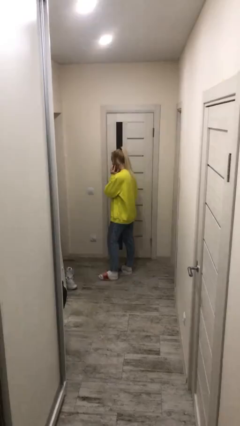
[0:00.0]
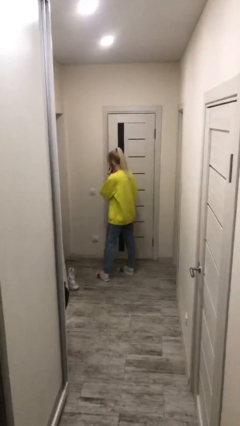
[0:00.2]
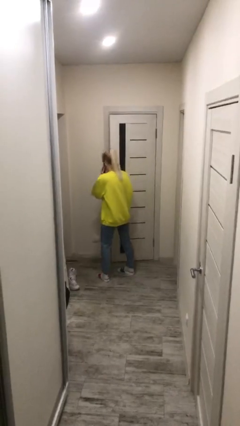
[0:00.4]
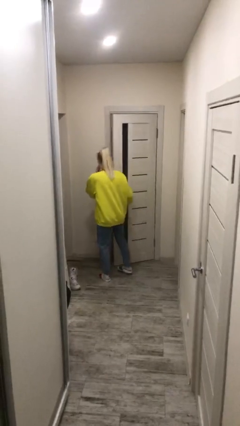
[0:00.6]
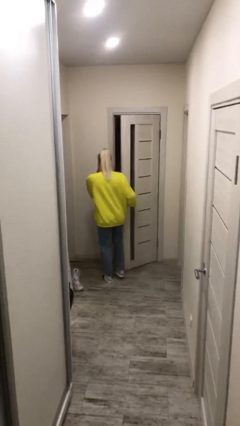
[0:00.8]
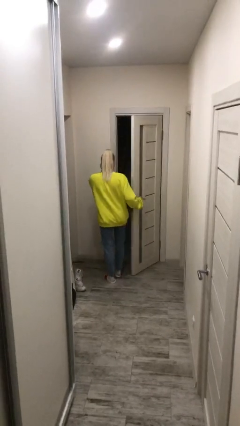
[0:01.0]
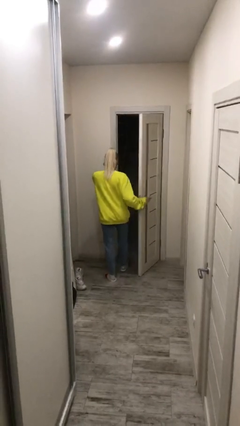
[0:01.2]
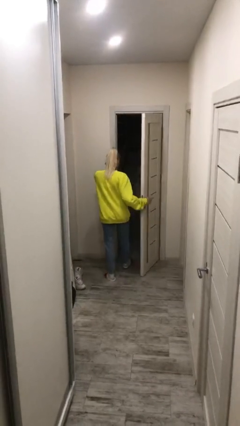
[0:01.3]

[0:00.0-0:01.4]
person opens facility door

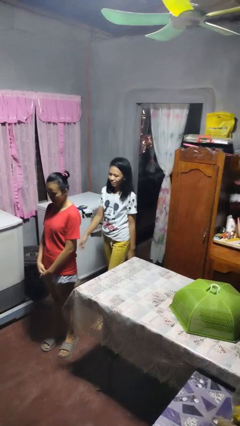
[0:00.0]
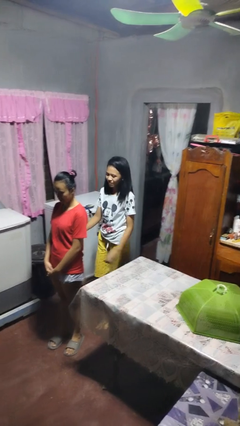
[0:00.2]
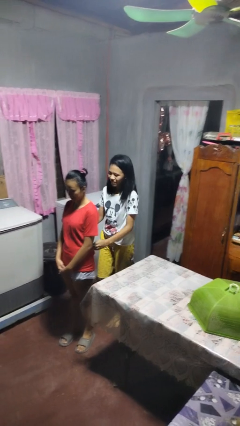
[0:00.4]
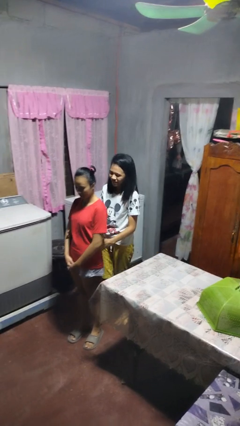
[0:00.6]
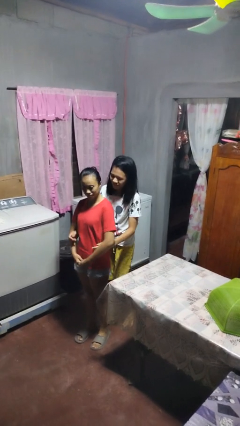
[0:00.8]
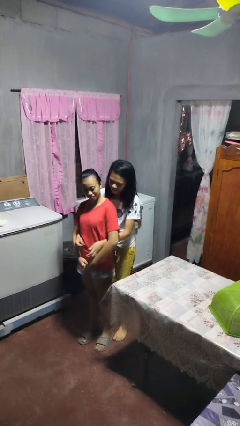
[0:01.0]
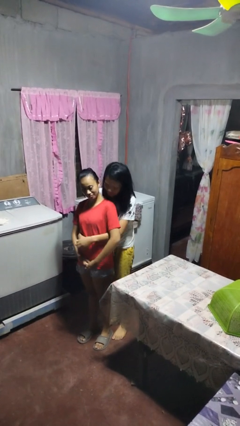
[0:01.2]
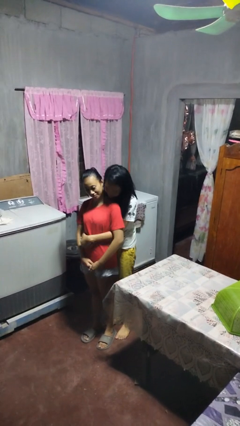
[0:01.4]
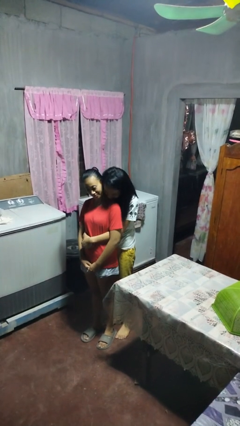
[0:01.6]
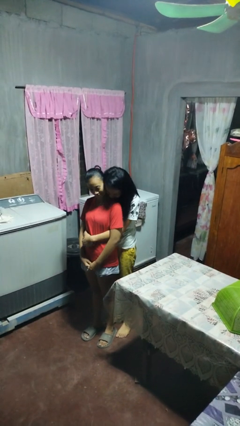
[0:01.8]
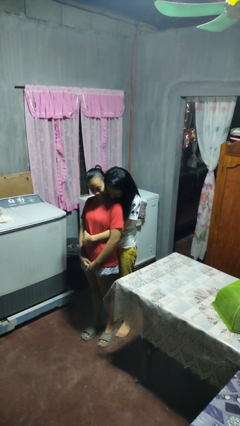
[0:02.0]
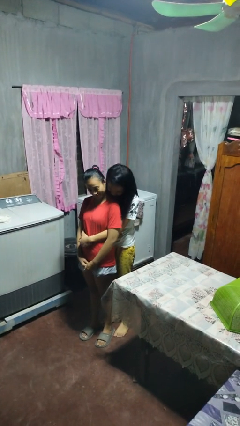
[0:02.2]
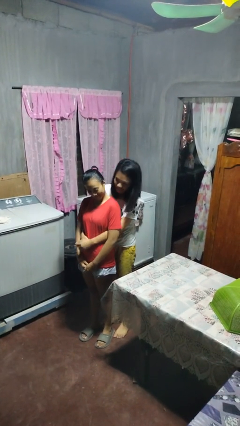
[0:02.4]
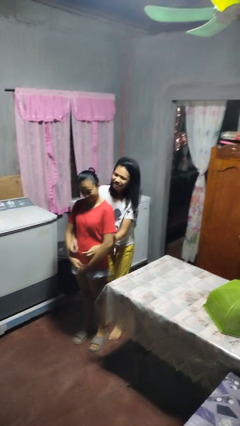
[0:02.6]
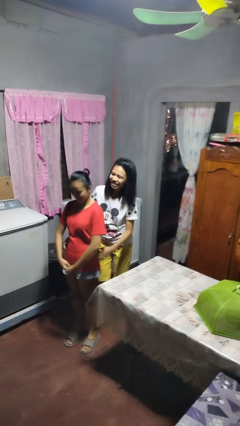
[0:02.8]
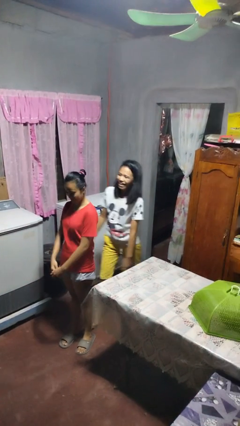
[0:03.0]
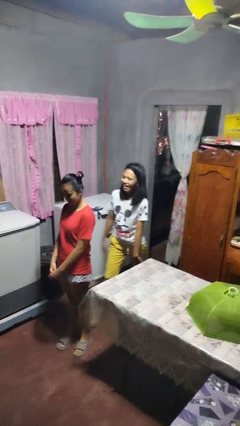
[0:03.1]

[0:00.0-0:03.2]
person hugs person from behind

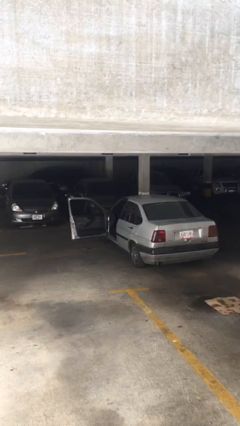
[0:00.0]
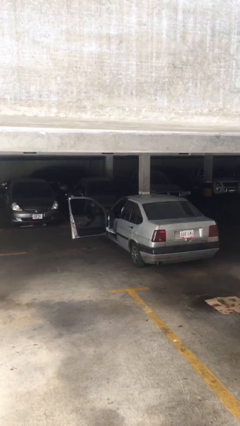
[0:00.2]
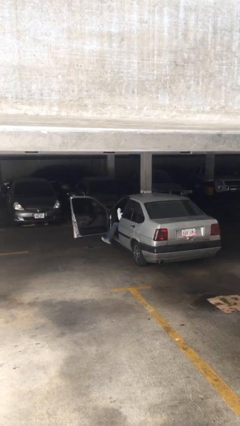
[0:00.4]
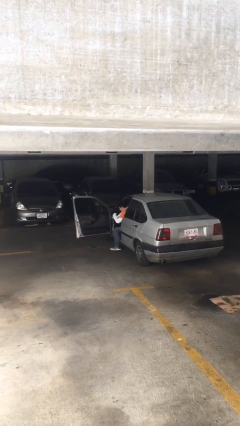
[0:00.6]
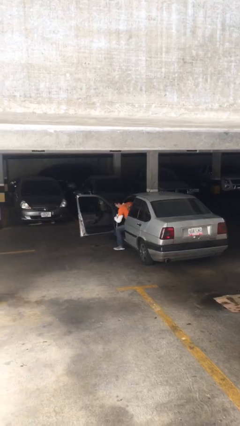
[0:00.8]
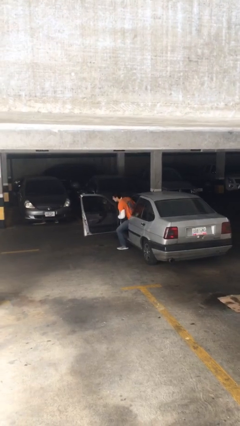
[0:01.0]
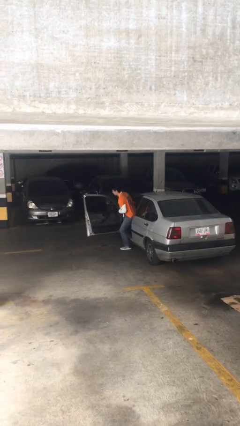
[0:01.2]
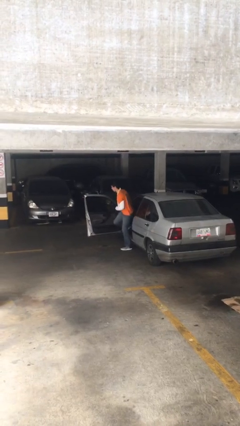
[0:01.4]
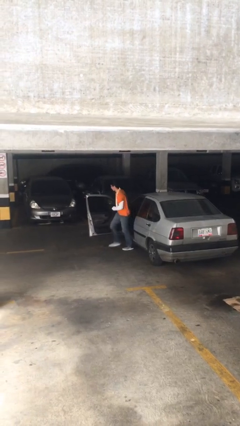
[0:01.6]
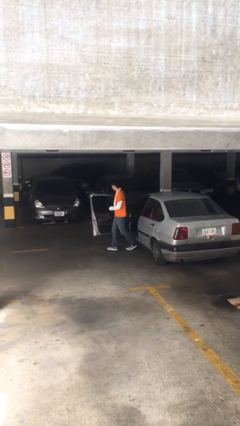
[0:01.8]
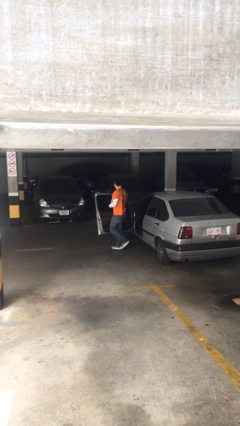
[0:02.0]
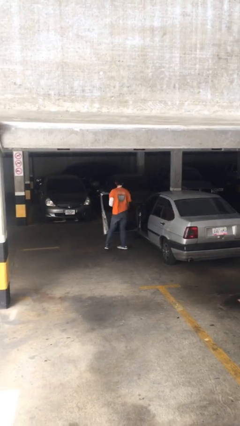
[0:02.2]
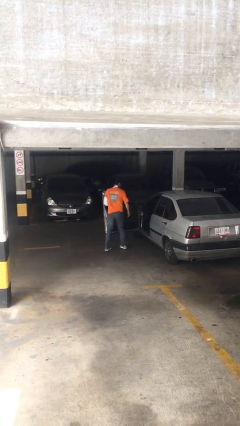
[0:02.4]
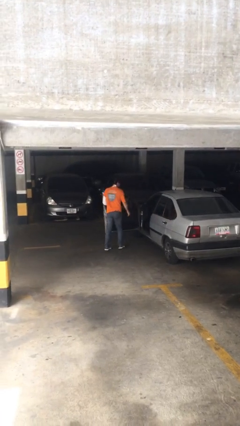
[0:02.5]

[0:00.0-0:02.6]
person exits car

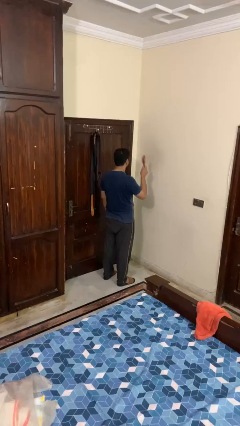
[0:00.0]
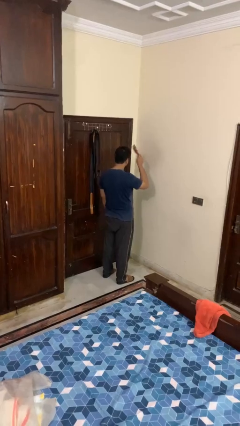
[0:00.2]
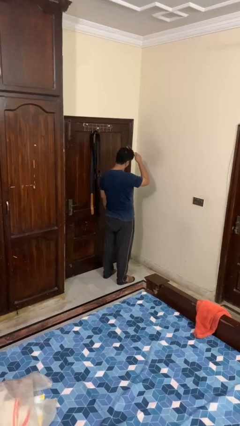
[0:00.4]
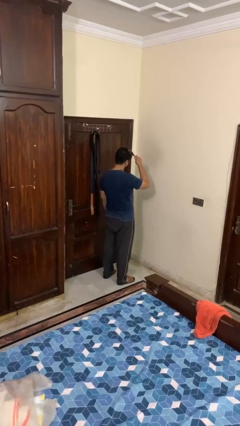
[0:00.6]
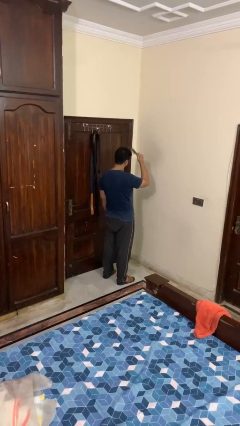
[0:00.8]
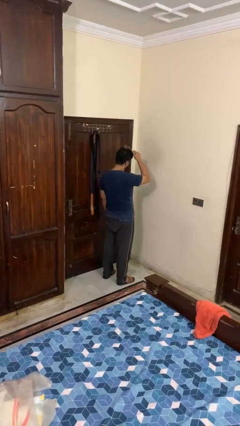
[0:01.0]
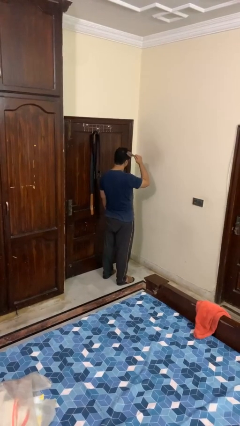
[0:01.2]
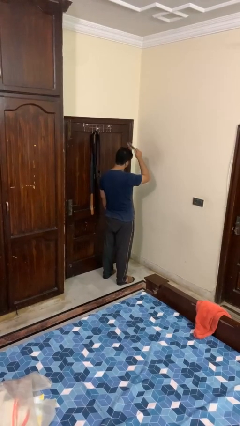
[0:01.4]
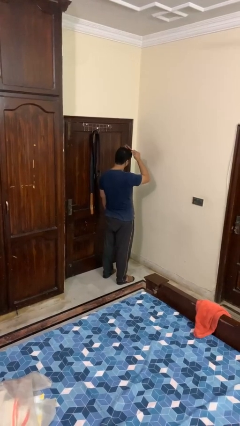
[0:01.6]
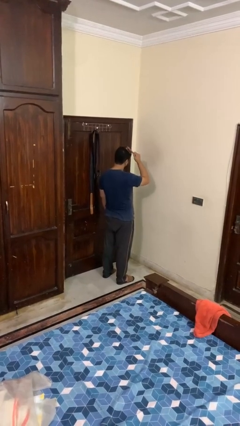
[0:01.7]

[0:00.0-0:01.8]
person brushes hair

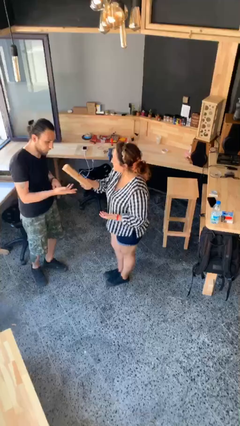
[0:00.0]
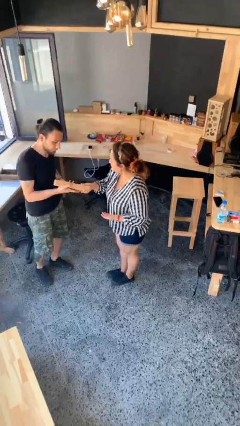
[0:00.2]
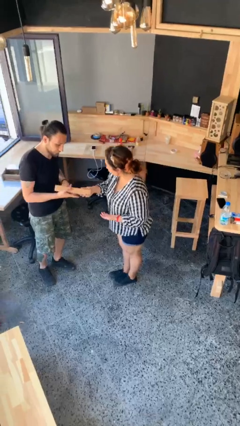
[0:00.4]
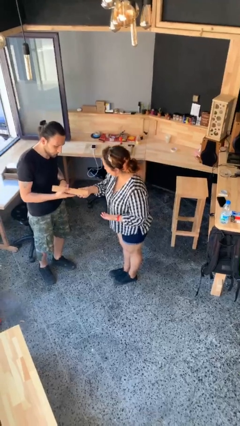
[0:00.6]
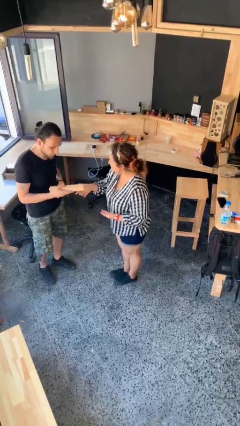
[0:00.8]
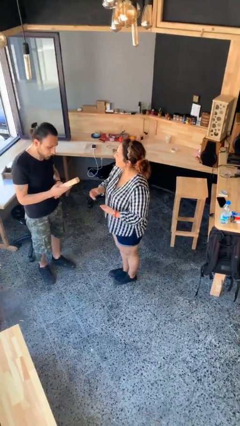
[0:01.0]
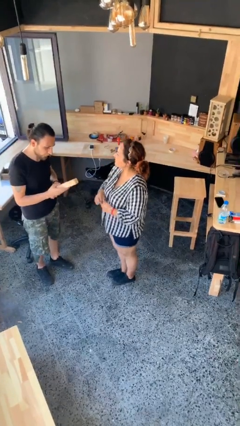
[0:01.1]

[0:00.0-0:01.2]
person transfers object to person

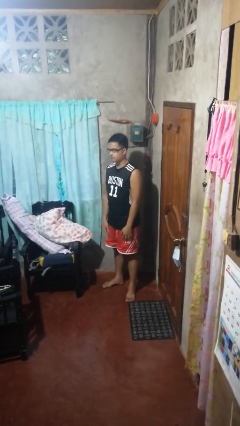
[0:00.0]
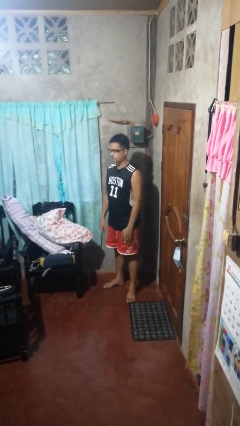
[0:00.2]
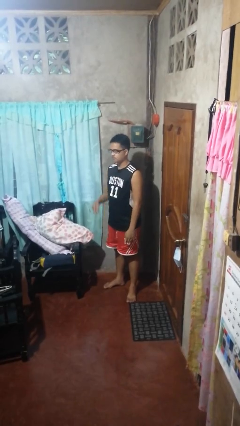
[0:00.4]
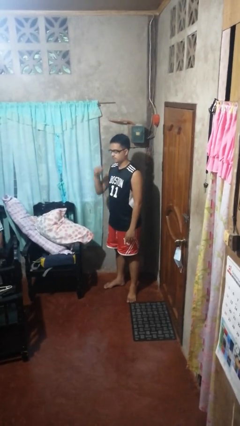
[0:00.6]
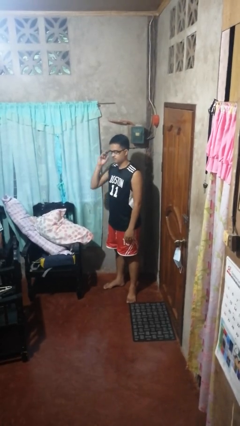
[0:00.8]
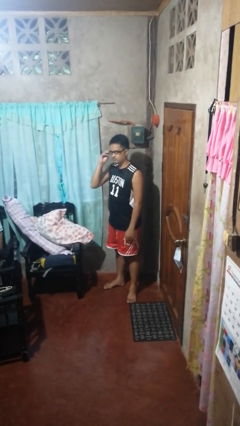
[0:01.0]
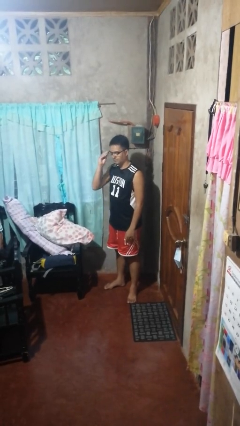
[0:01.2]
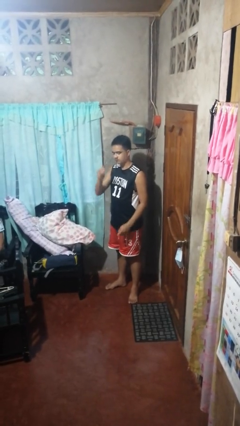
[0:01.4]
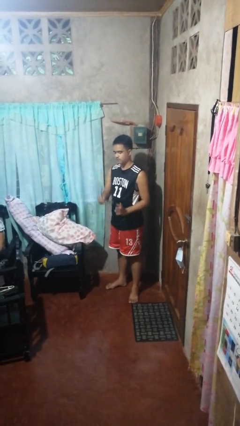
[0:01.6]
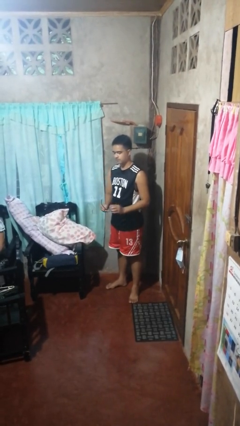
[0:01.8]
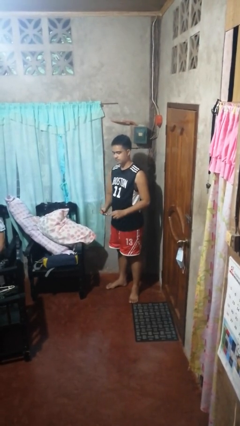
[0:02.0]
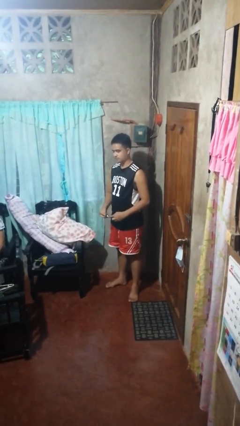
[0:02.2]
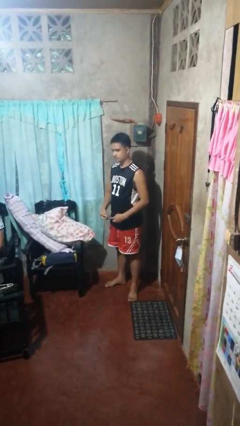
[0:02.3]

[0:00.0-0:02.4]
person takes off glasses

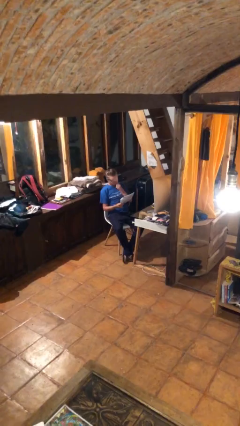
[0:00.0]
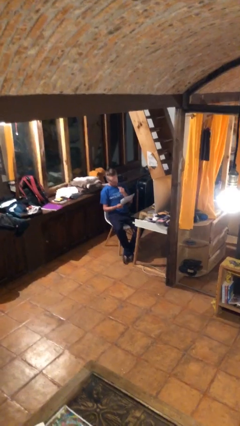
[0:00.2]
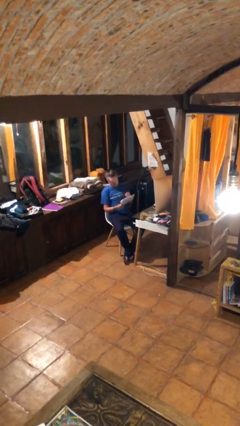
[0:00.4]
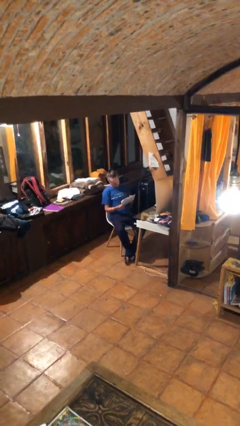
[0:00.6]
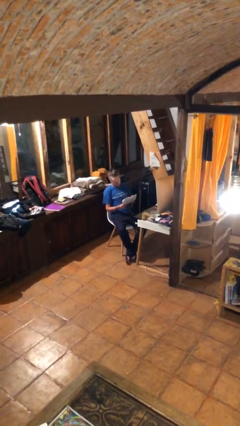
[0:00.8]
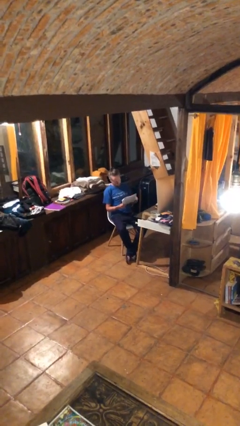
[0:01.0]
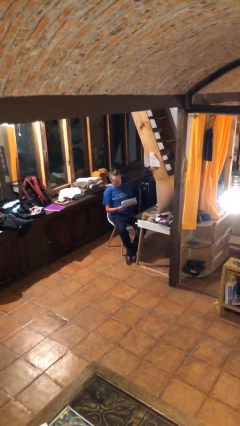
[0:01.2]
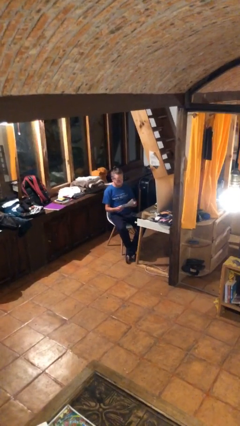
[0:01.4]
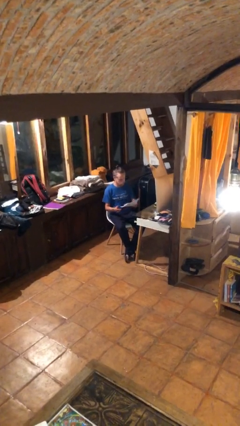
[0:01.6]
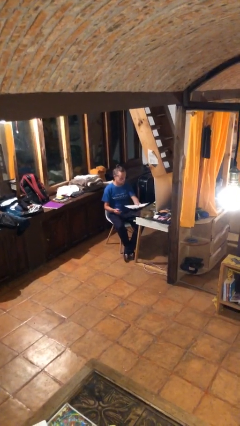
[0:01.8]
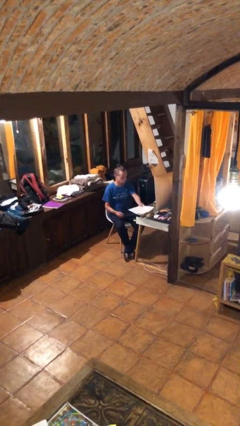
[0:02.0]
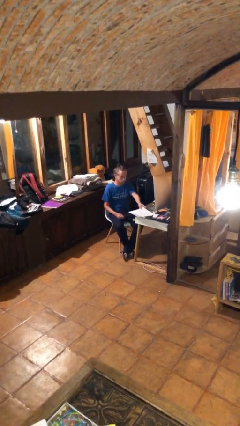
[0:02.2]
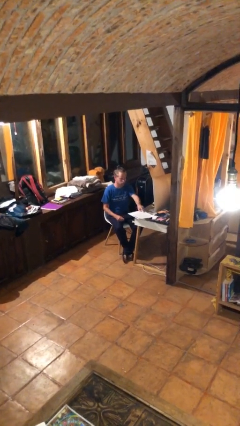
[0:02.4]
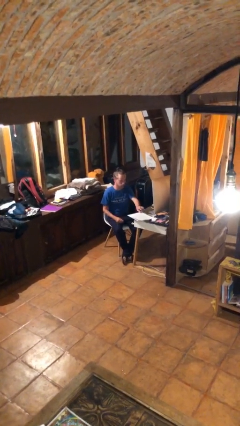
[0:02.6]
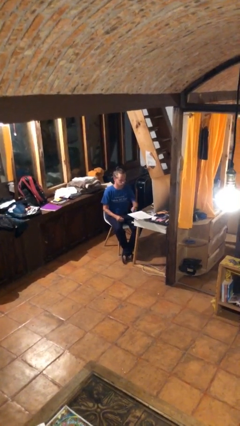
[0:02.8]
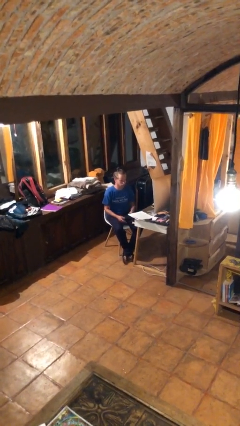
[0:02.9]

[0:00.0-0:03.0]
person puts down object on table

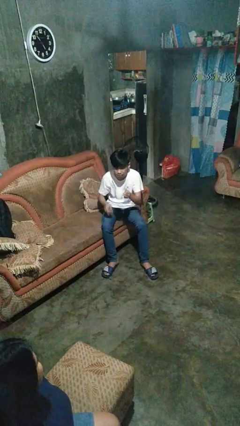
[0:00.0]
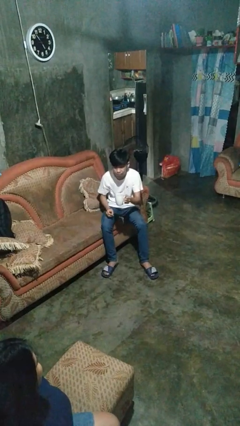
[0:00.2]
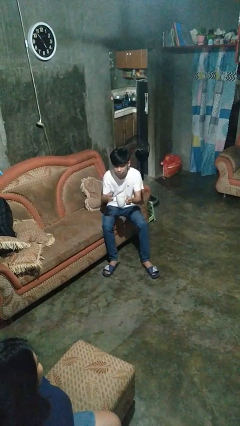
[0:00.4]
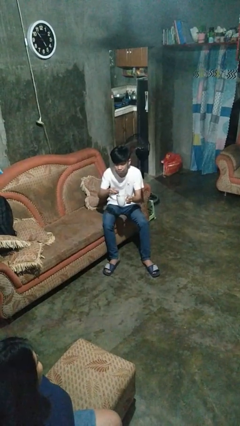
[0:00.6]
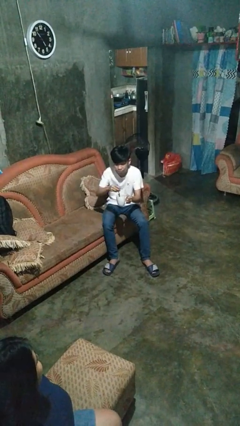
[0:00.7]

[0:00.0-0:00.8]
person stirs mug

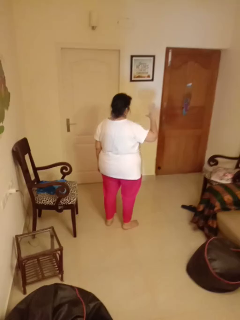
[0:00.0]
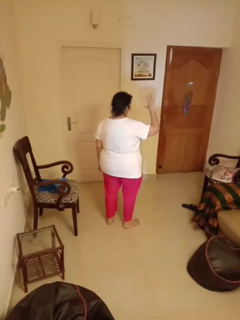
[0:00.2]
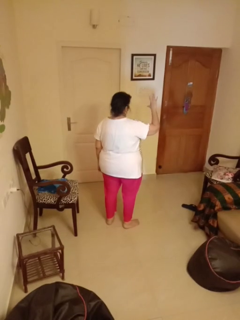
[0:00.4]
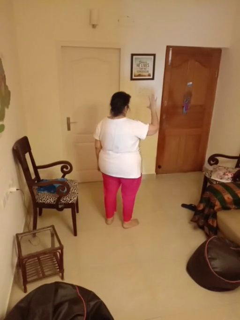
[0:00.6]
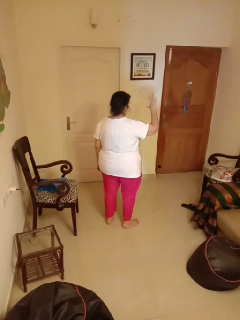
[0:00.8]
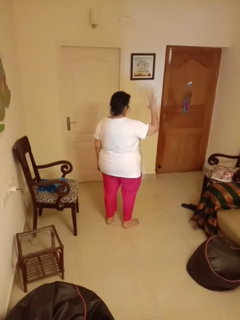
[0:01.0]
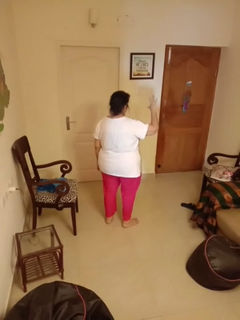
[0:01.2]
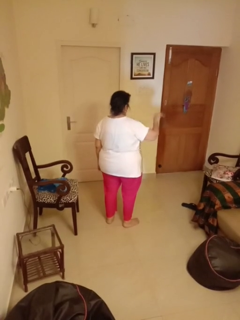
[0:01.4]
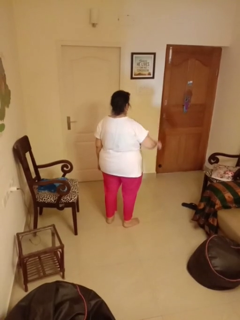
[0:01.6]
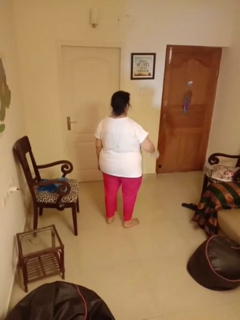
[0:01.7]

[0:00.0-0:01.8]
person gestures number five
